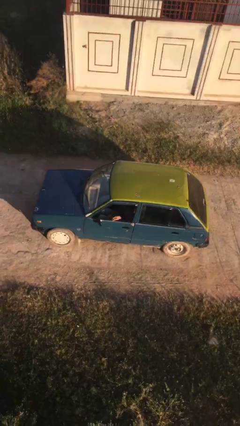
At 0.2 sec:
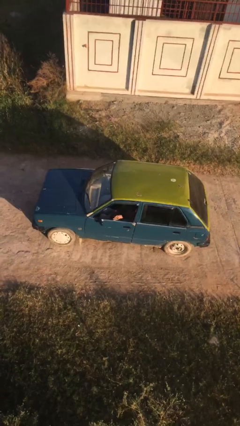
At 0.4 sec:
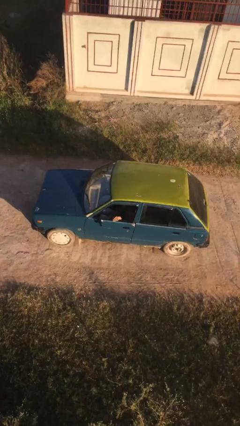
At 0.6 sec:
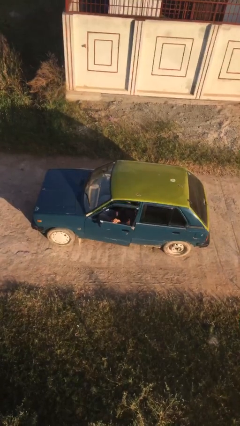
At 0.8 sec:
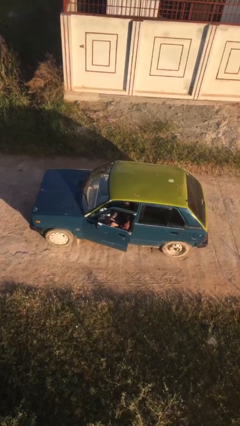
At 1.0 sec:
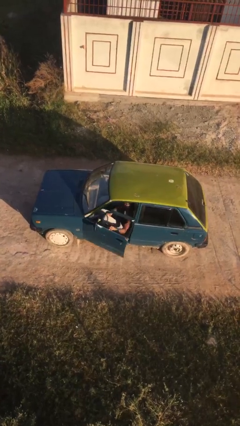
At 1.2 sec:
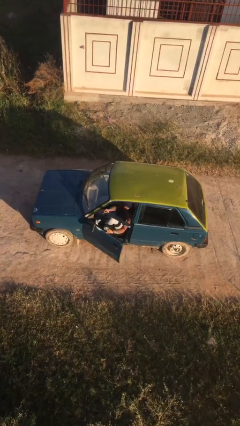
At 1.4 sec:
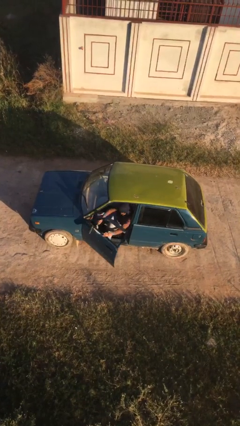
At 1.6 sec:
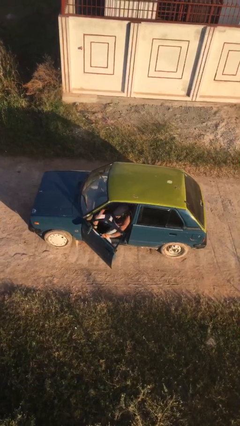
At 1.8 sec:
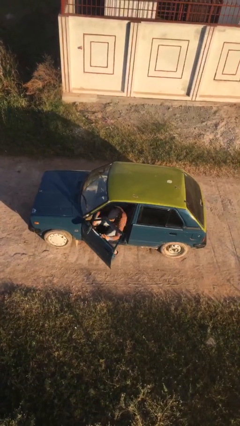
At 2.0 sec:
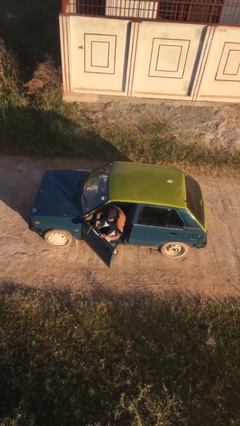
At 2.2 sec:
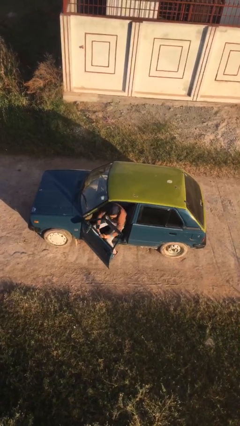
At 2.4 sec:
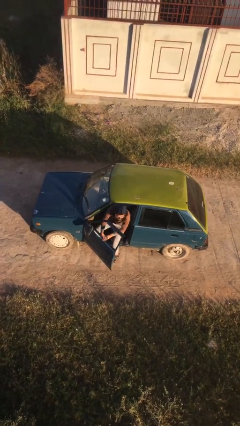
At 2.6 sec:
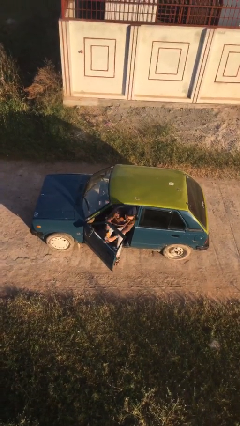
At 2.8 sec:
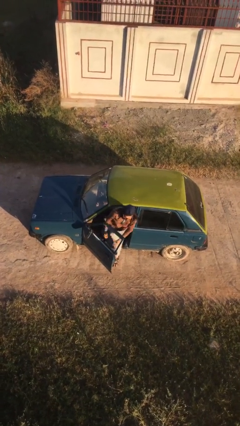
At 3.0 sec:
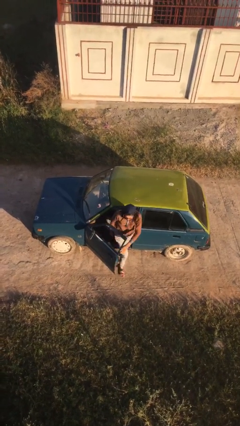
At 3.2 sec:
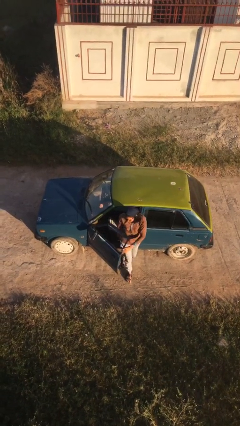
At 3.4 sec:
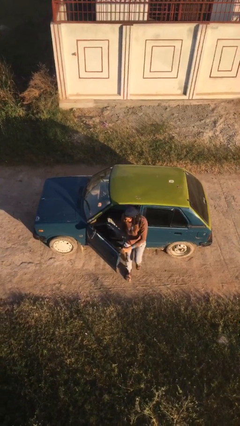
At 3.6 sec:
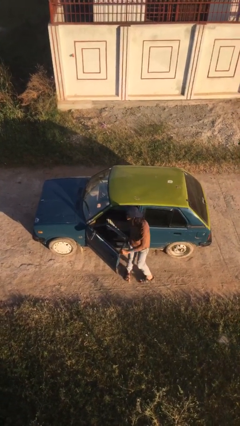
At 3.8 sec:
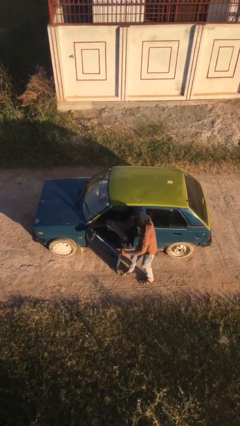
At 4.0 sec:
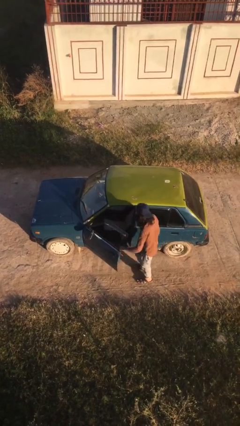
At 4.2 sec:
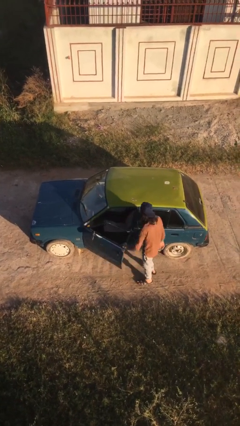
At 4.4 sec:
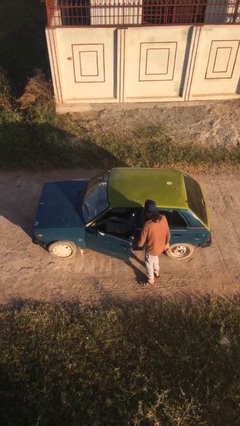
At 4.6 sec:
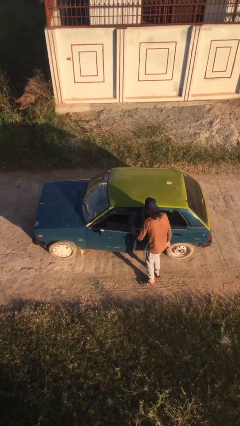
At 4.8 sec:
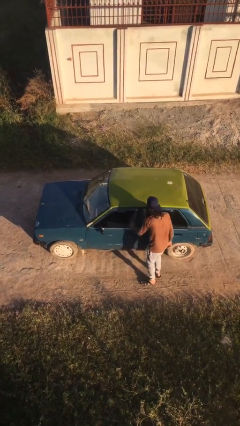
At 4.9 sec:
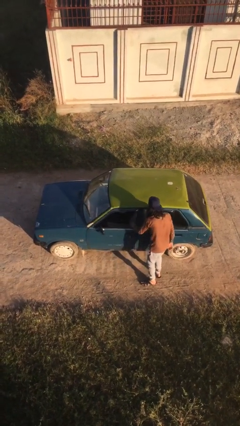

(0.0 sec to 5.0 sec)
car drops off person

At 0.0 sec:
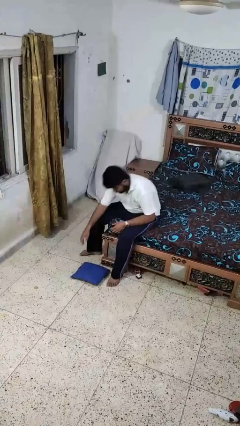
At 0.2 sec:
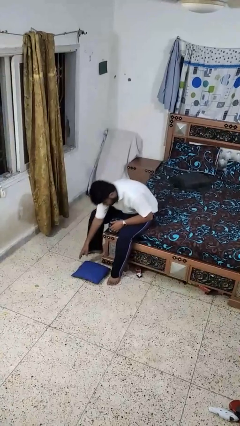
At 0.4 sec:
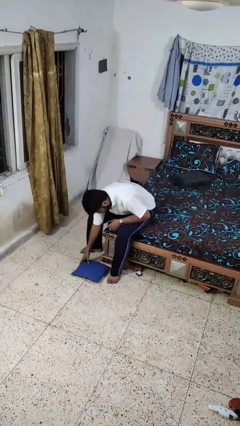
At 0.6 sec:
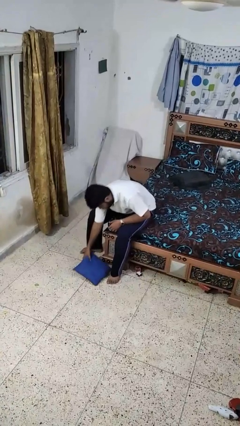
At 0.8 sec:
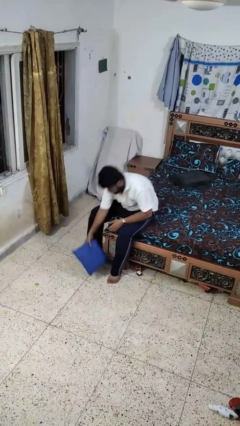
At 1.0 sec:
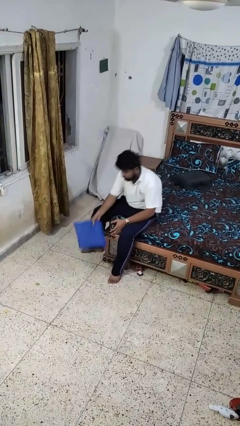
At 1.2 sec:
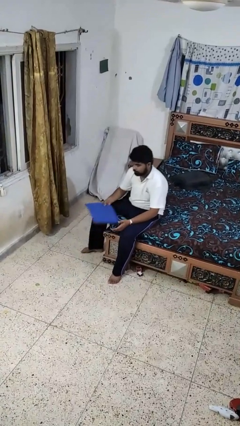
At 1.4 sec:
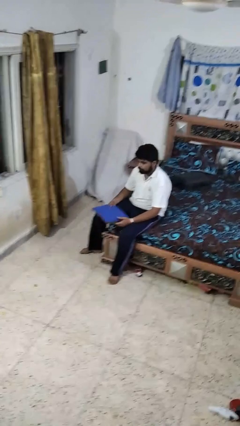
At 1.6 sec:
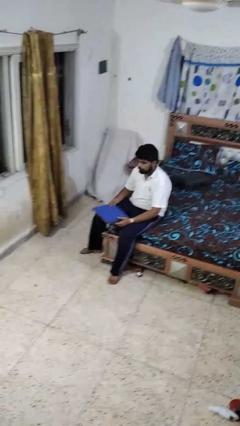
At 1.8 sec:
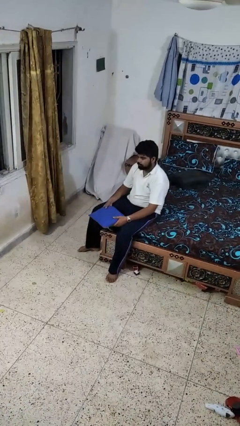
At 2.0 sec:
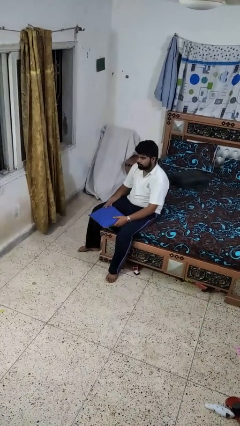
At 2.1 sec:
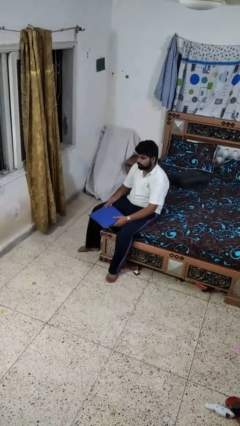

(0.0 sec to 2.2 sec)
person picks up object from floor

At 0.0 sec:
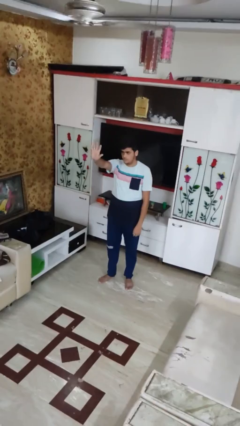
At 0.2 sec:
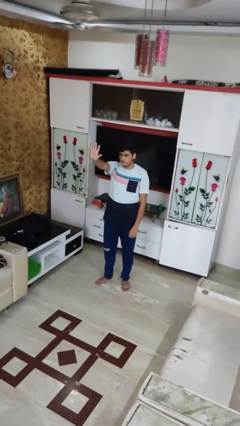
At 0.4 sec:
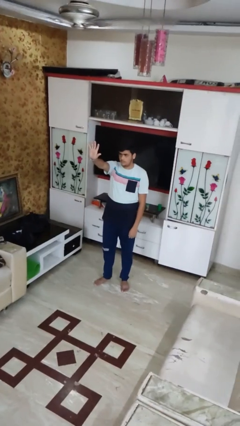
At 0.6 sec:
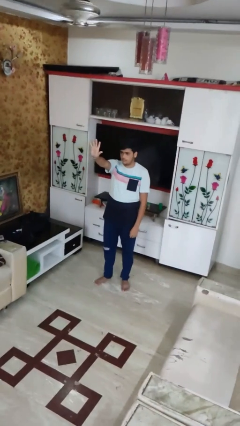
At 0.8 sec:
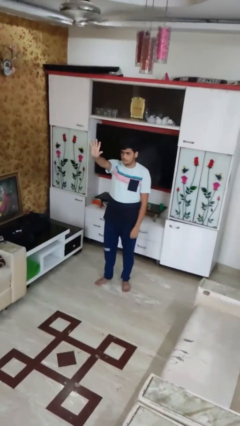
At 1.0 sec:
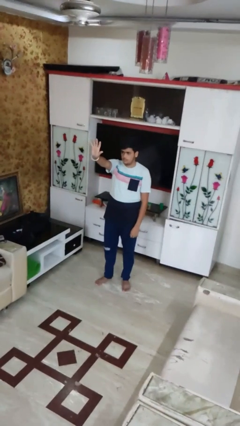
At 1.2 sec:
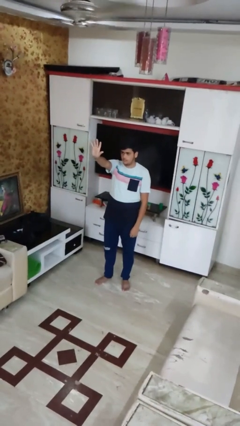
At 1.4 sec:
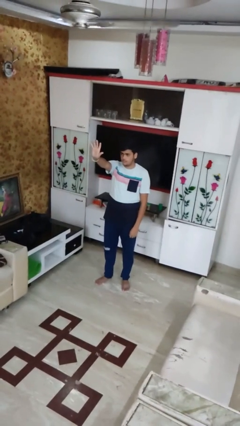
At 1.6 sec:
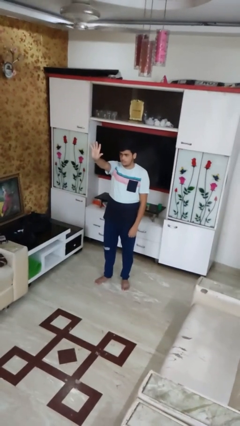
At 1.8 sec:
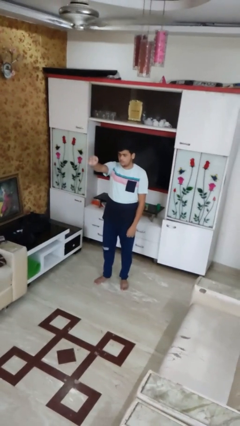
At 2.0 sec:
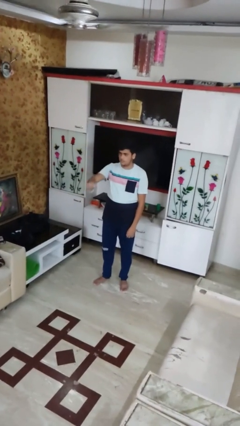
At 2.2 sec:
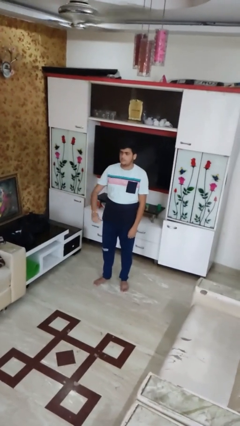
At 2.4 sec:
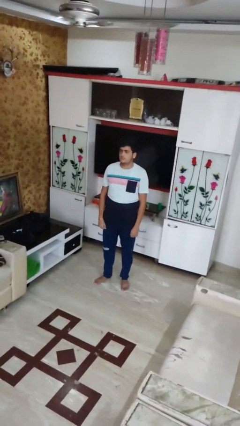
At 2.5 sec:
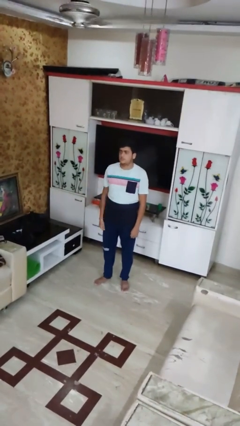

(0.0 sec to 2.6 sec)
person gestures number five

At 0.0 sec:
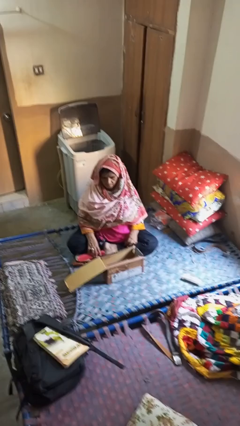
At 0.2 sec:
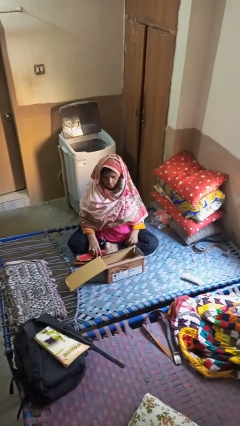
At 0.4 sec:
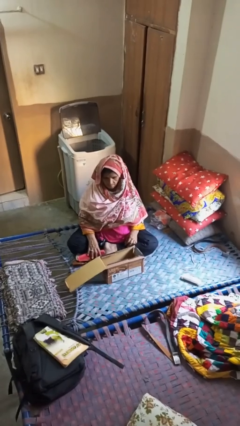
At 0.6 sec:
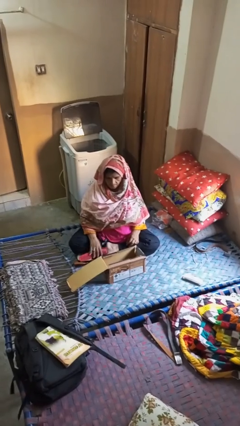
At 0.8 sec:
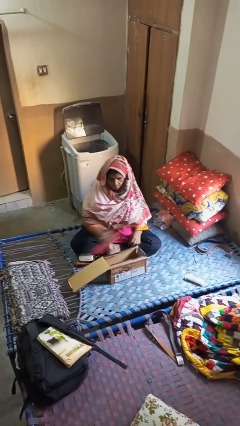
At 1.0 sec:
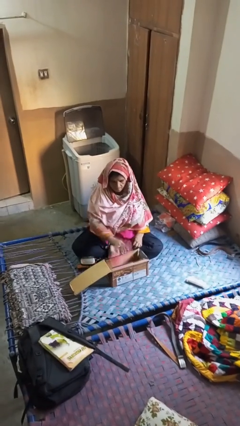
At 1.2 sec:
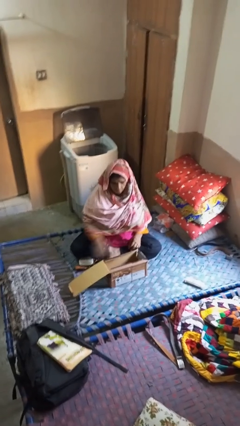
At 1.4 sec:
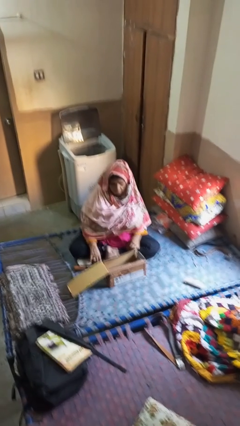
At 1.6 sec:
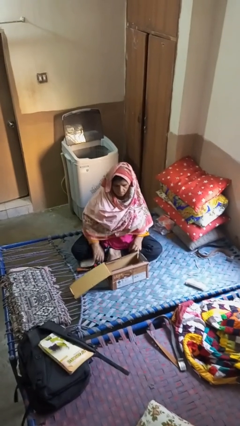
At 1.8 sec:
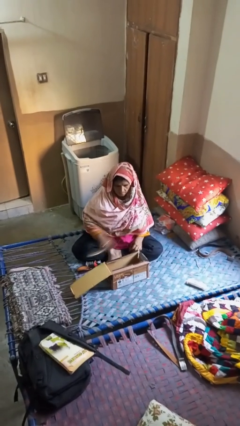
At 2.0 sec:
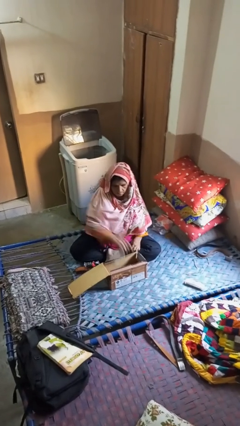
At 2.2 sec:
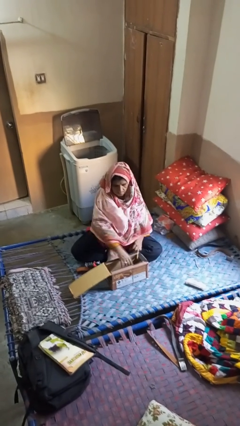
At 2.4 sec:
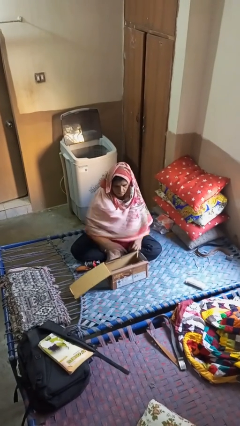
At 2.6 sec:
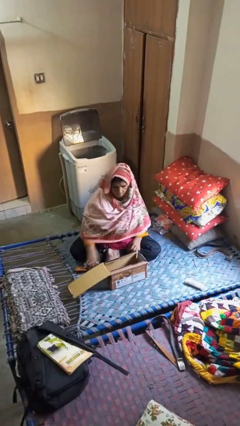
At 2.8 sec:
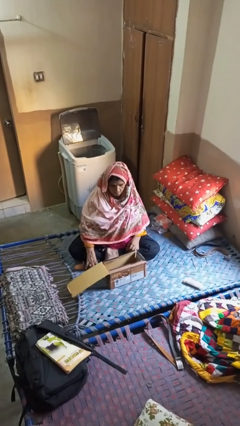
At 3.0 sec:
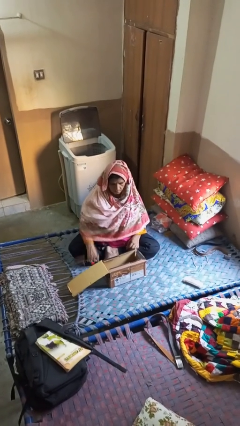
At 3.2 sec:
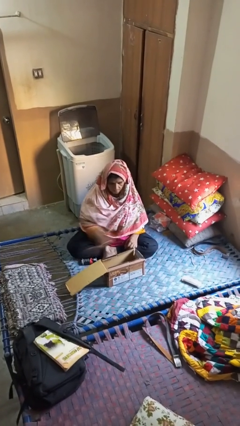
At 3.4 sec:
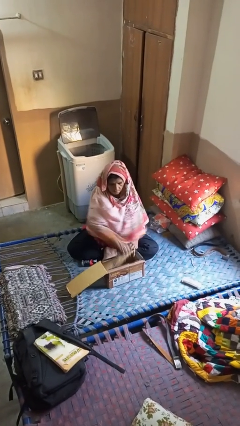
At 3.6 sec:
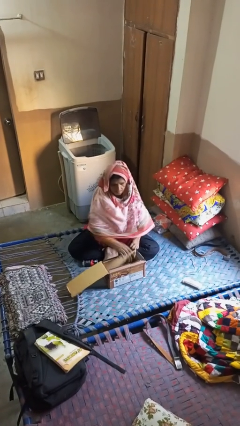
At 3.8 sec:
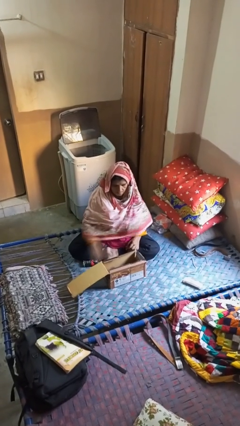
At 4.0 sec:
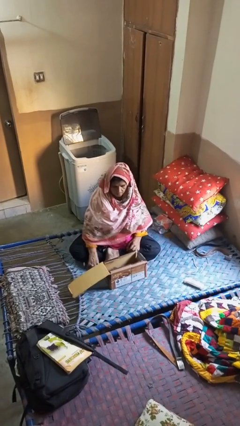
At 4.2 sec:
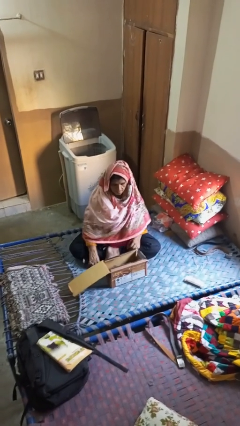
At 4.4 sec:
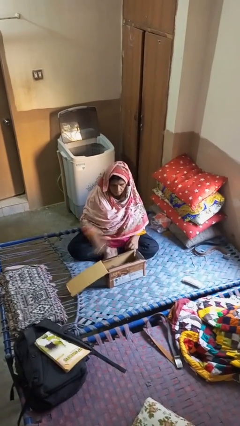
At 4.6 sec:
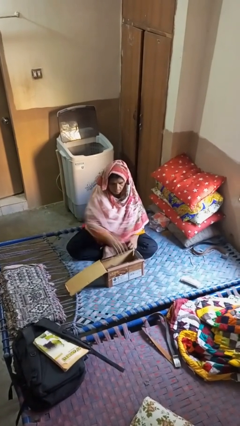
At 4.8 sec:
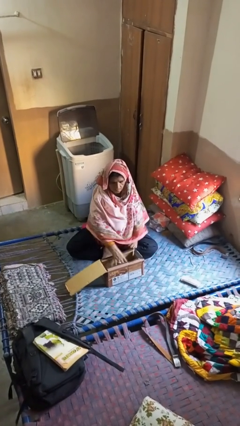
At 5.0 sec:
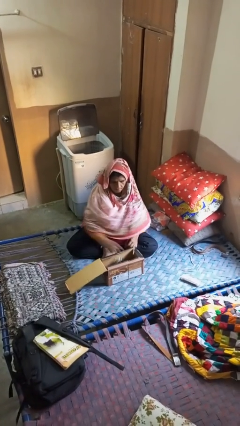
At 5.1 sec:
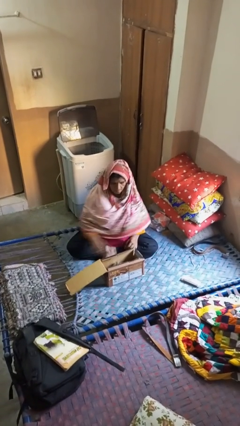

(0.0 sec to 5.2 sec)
person puts object into box

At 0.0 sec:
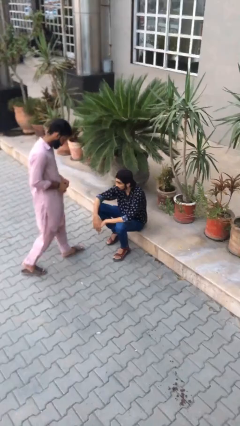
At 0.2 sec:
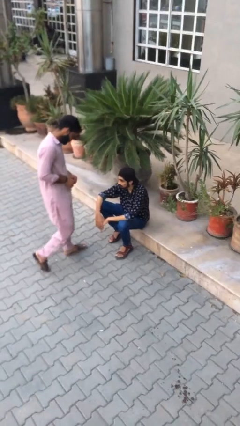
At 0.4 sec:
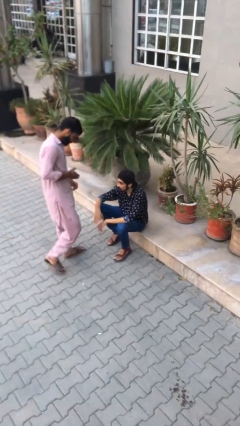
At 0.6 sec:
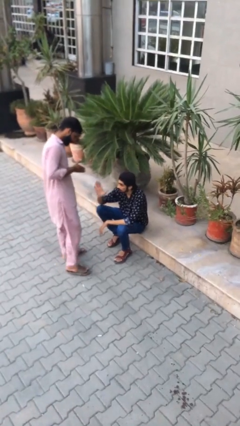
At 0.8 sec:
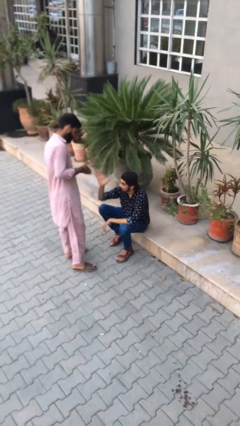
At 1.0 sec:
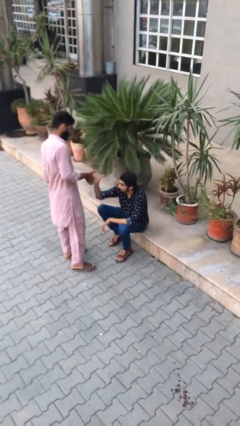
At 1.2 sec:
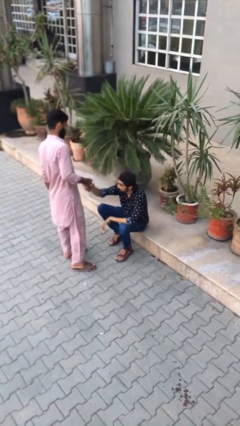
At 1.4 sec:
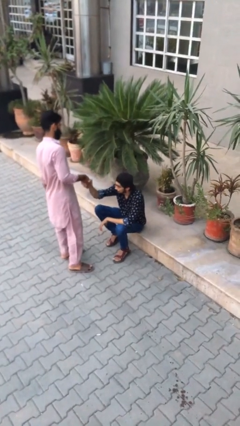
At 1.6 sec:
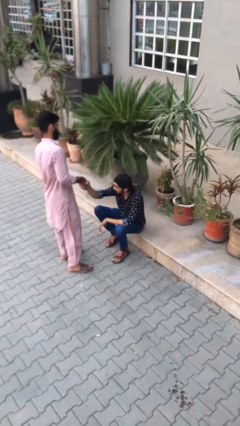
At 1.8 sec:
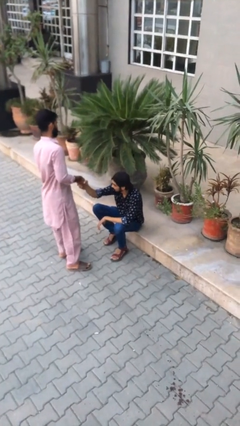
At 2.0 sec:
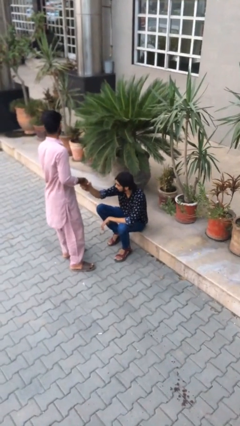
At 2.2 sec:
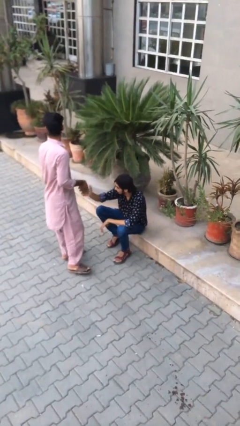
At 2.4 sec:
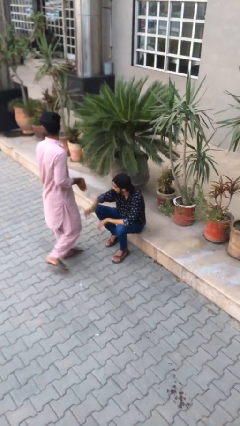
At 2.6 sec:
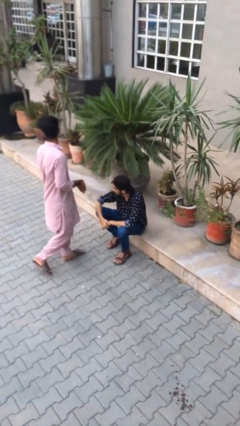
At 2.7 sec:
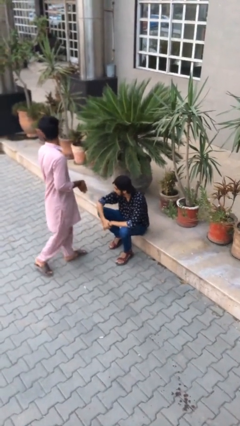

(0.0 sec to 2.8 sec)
person shakes hand
